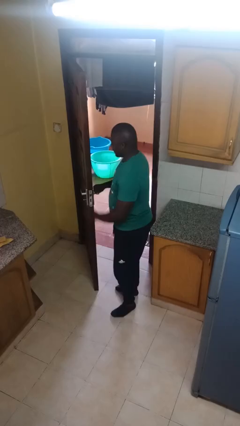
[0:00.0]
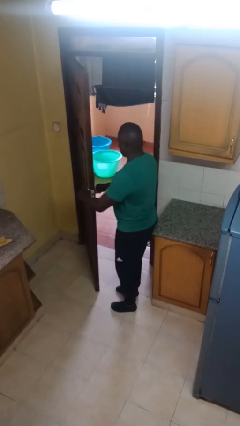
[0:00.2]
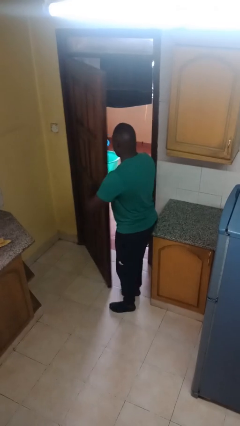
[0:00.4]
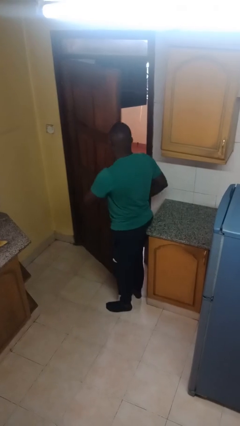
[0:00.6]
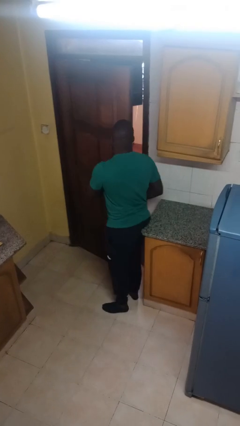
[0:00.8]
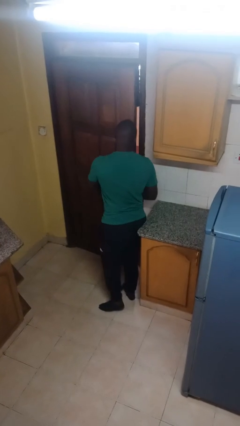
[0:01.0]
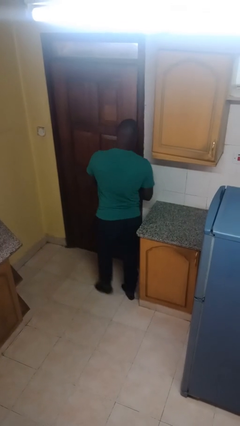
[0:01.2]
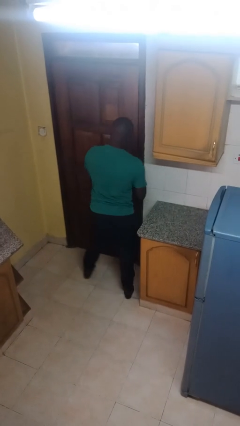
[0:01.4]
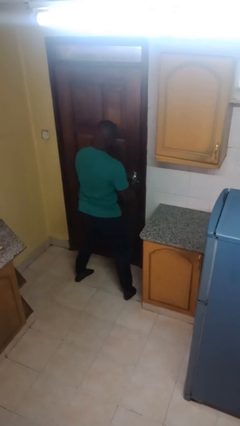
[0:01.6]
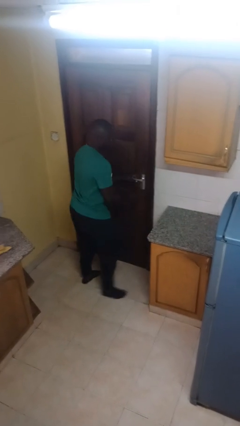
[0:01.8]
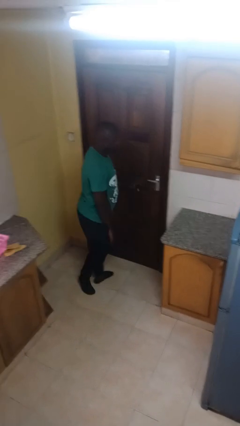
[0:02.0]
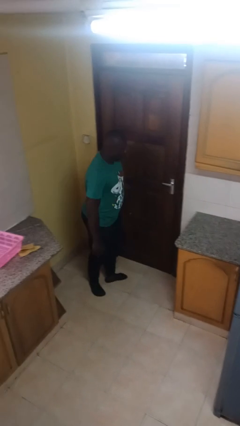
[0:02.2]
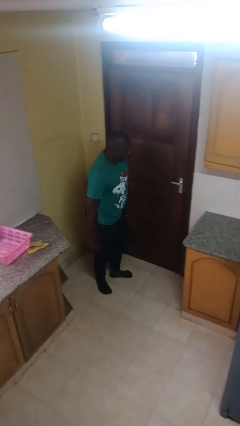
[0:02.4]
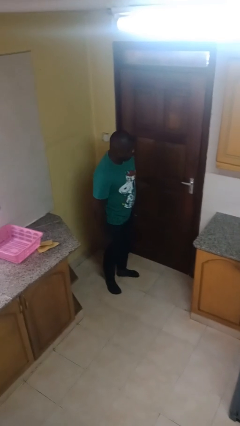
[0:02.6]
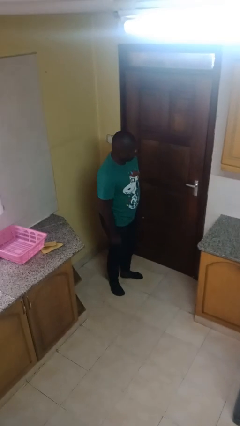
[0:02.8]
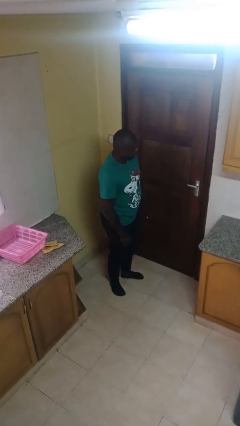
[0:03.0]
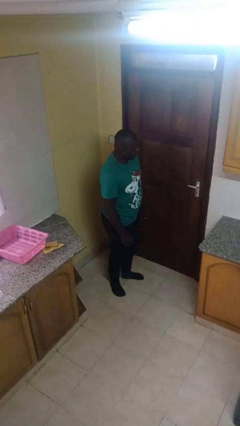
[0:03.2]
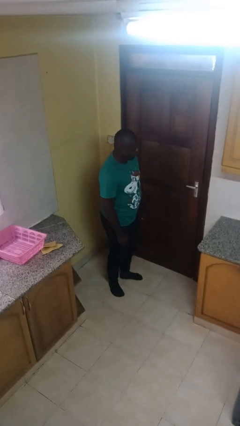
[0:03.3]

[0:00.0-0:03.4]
person closes facility door

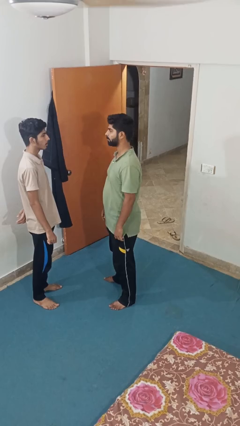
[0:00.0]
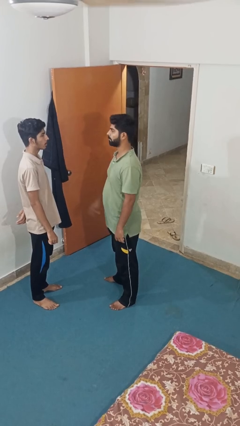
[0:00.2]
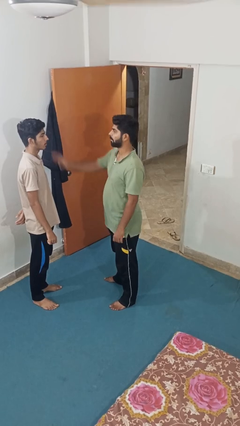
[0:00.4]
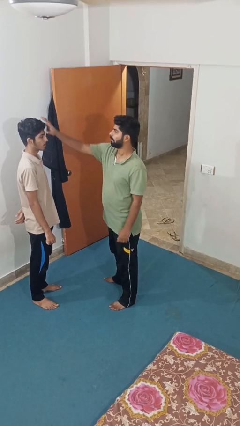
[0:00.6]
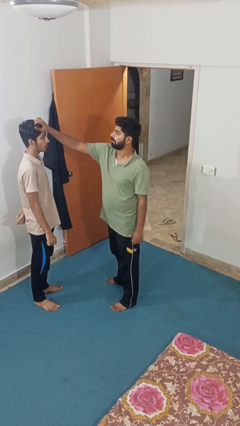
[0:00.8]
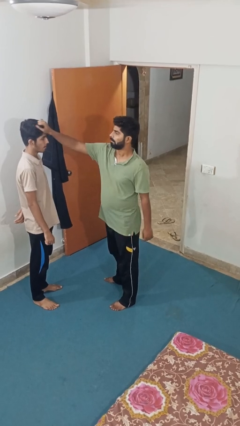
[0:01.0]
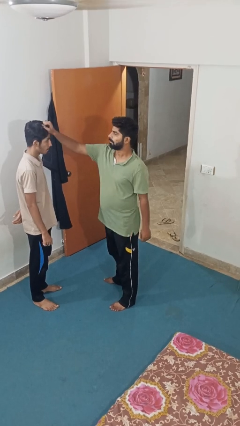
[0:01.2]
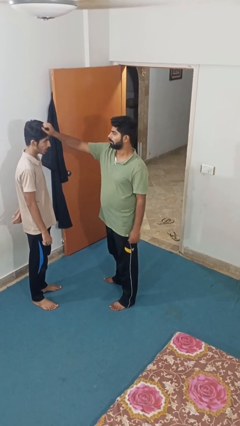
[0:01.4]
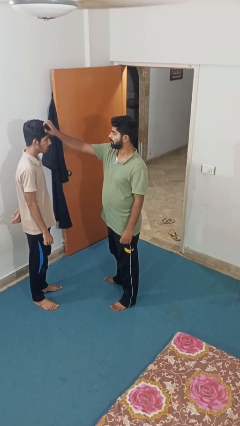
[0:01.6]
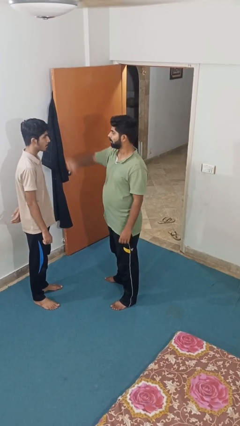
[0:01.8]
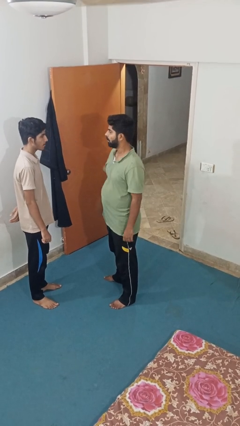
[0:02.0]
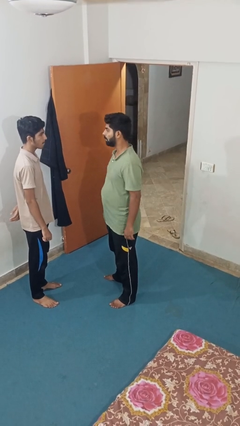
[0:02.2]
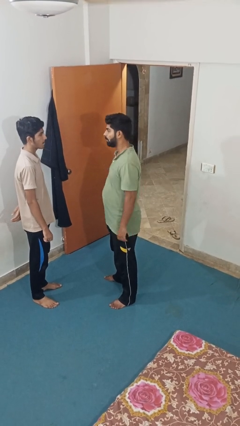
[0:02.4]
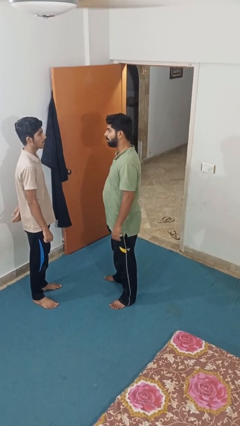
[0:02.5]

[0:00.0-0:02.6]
person grabs person by hair

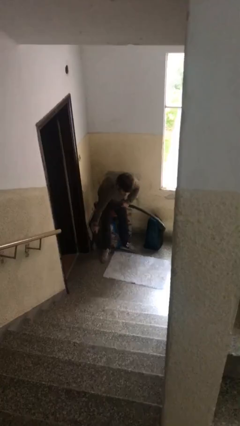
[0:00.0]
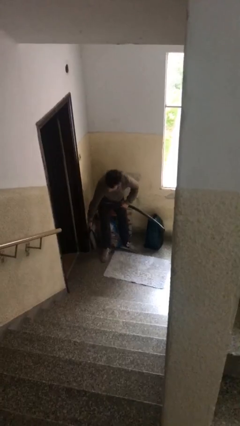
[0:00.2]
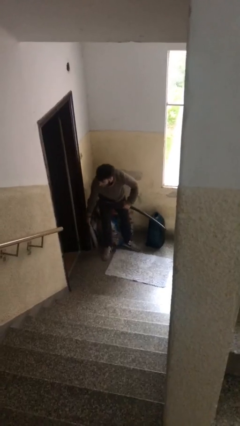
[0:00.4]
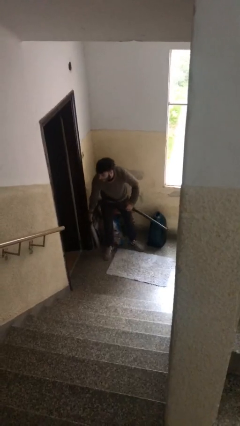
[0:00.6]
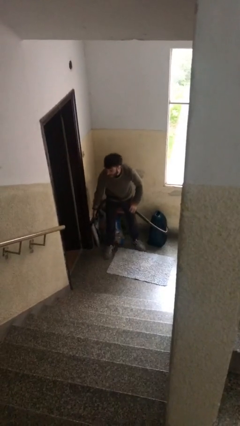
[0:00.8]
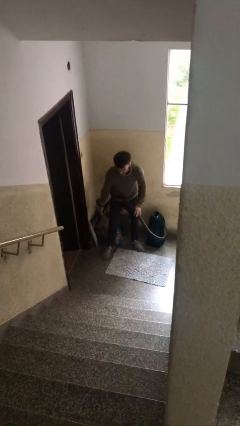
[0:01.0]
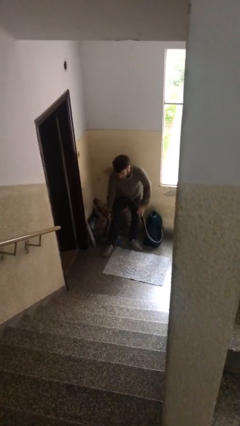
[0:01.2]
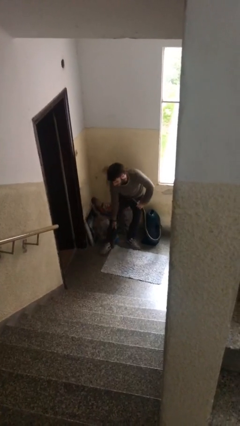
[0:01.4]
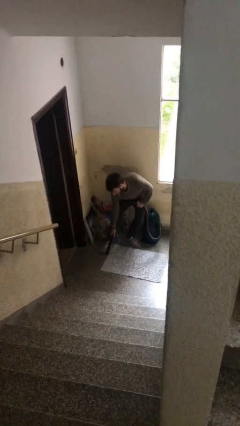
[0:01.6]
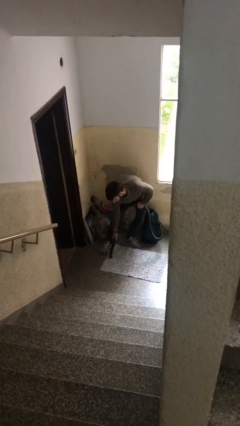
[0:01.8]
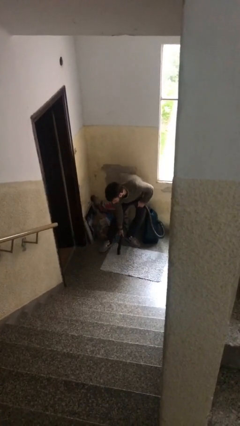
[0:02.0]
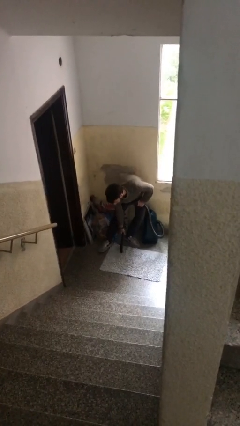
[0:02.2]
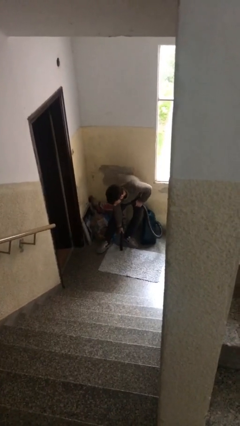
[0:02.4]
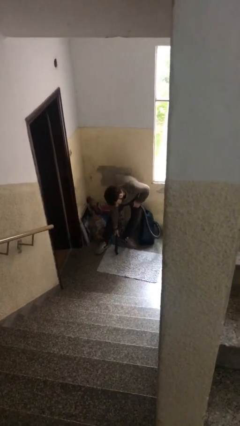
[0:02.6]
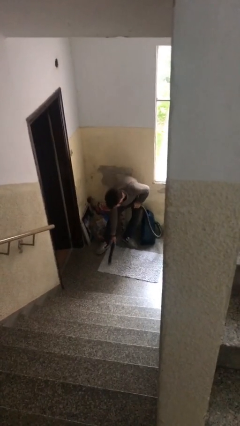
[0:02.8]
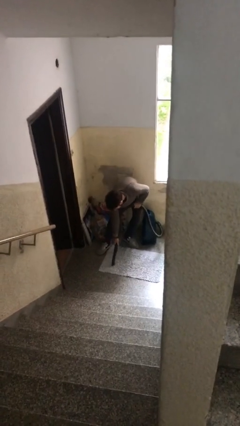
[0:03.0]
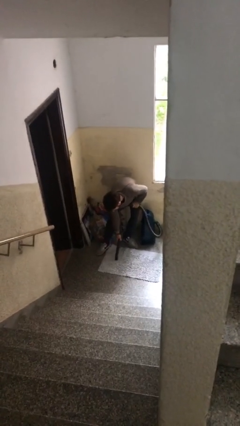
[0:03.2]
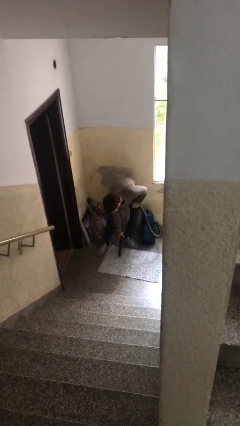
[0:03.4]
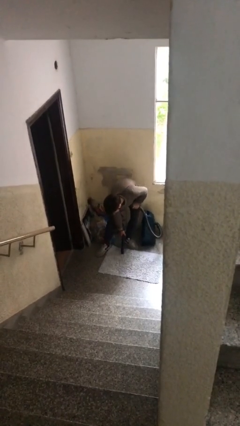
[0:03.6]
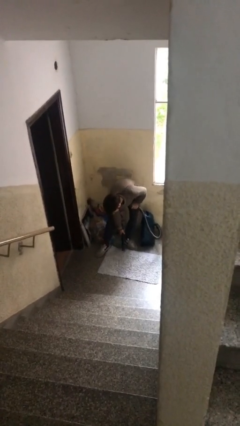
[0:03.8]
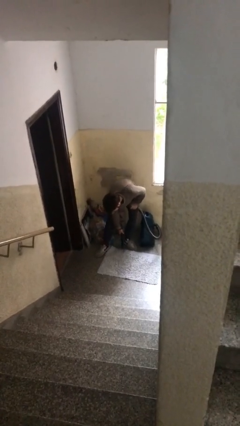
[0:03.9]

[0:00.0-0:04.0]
person vacuums carpet

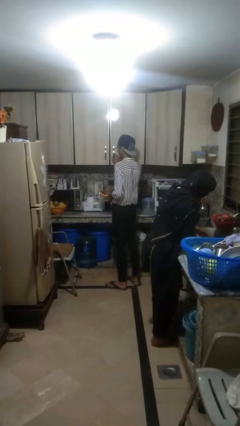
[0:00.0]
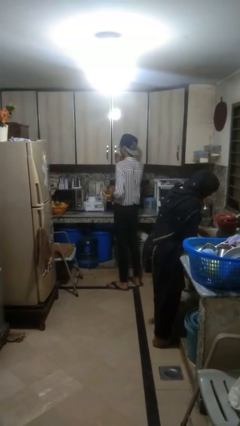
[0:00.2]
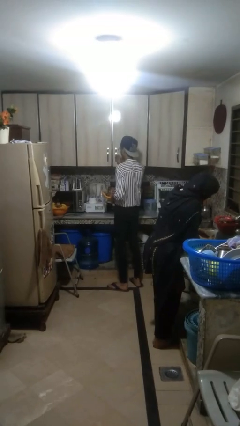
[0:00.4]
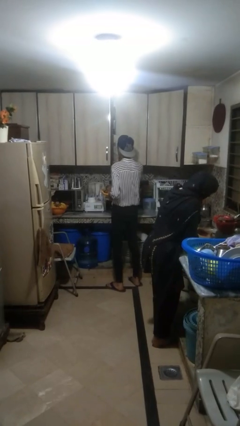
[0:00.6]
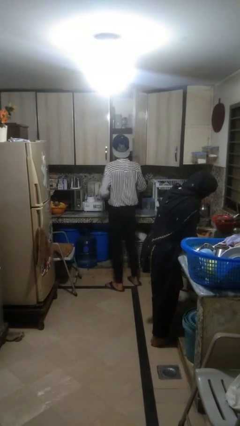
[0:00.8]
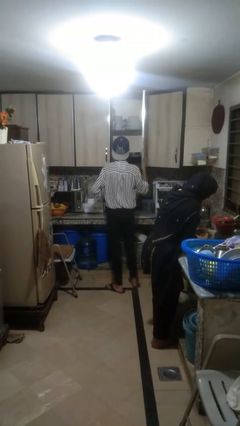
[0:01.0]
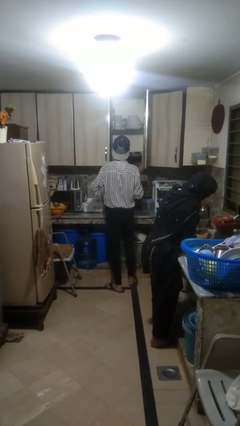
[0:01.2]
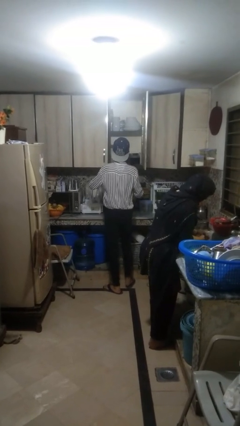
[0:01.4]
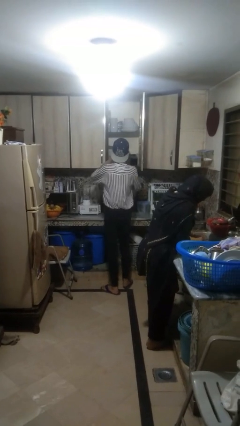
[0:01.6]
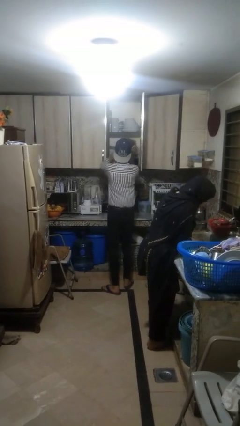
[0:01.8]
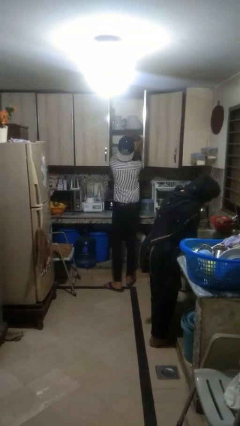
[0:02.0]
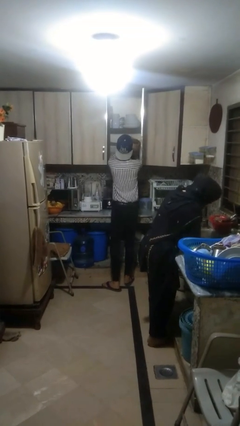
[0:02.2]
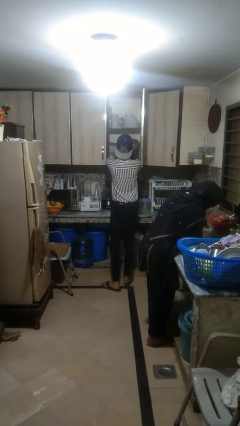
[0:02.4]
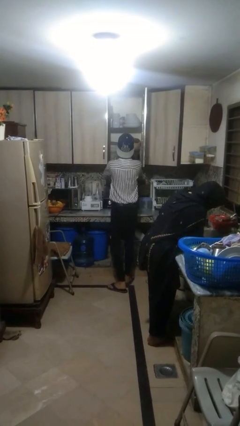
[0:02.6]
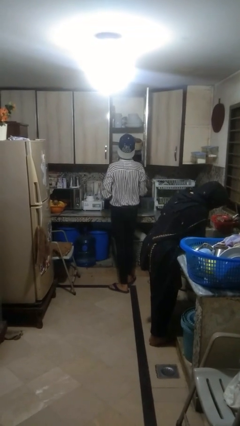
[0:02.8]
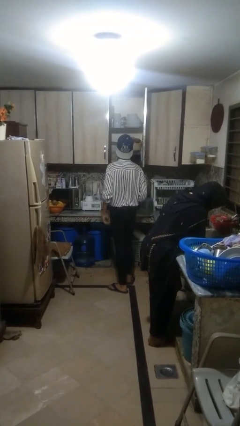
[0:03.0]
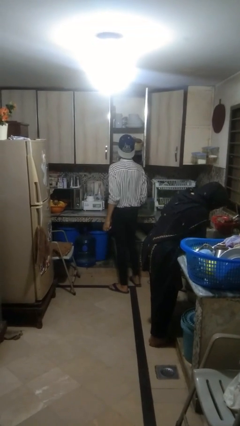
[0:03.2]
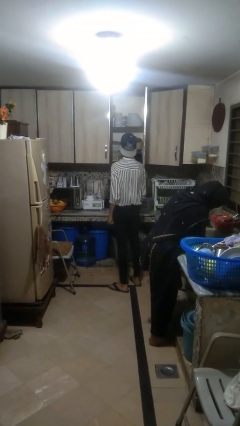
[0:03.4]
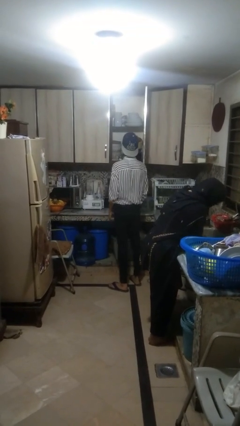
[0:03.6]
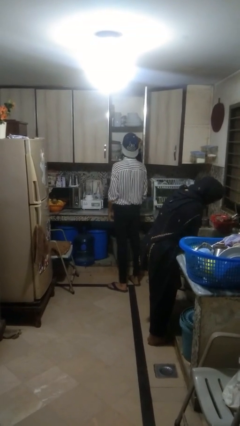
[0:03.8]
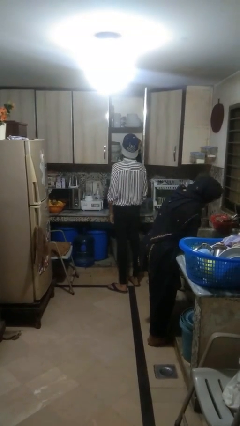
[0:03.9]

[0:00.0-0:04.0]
person puts object in cabinet

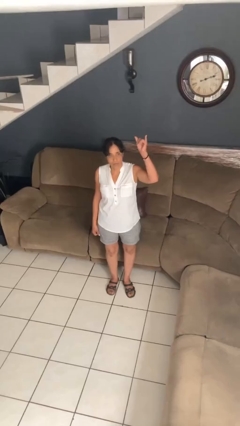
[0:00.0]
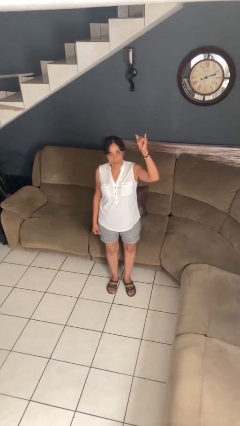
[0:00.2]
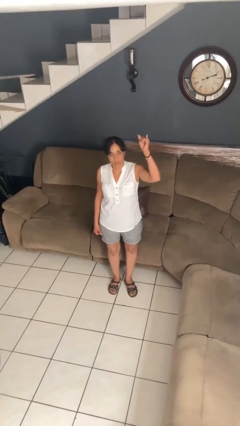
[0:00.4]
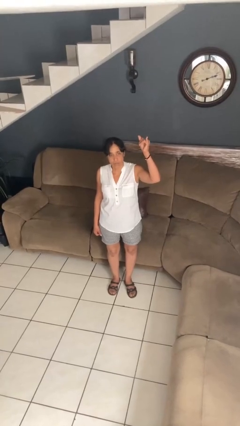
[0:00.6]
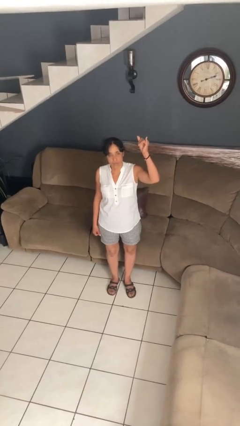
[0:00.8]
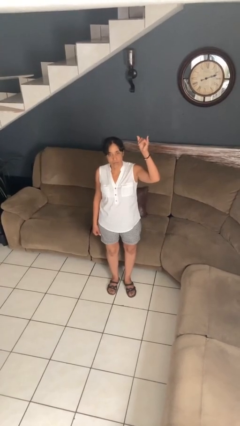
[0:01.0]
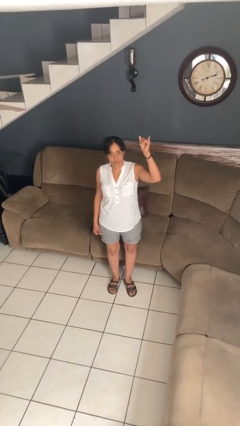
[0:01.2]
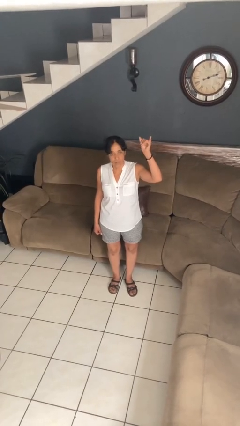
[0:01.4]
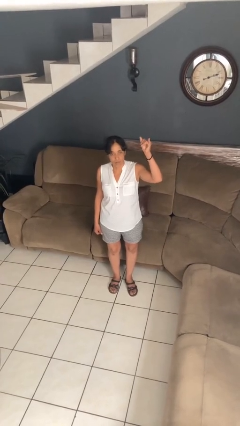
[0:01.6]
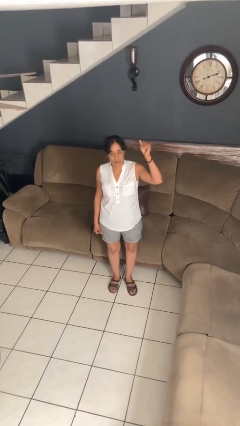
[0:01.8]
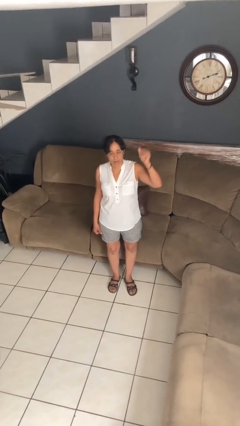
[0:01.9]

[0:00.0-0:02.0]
person gestures hang loose

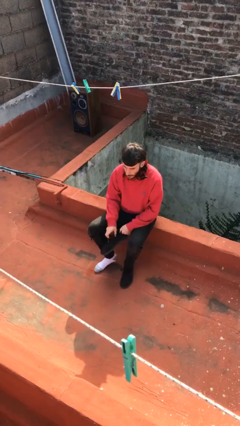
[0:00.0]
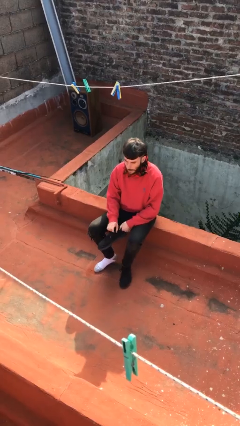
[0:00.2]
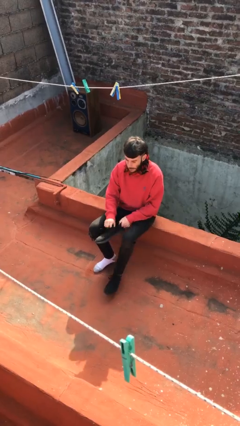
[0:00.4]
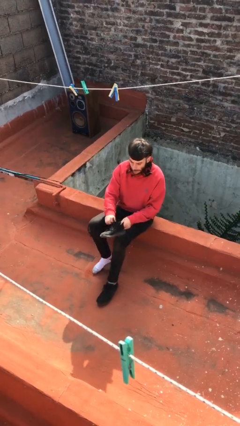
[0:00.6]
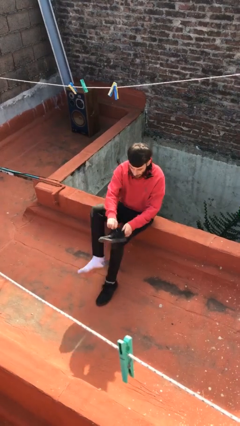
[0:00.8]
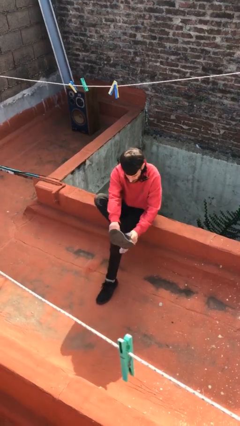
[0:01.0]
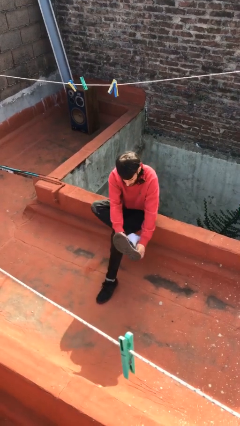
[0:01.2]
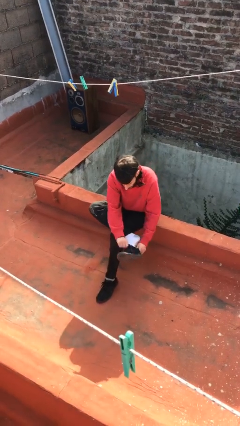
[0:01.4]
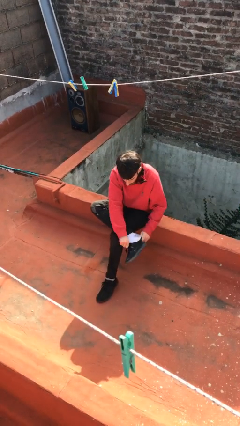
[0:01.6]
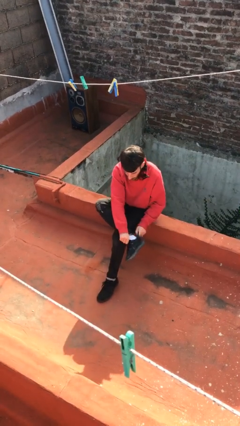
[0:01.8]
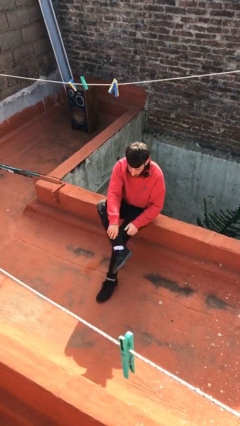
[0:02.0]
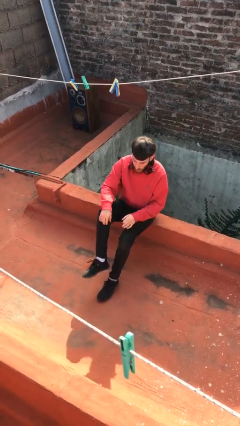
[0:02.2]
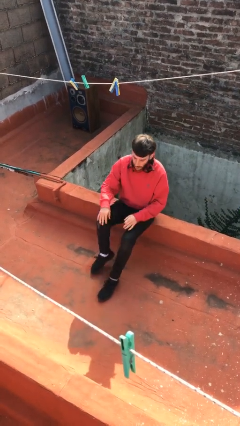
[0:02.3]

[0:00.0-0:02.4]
person puts on shoes
